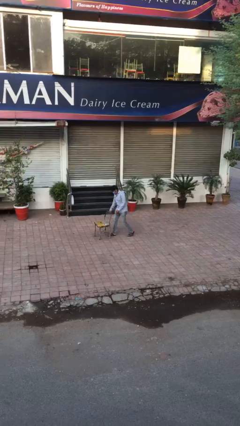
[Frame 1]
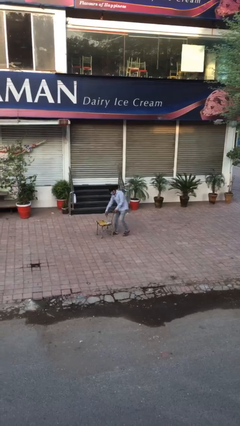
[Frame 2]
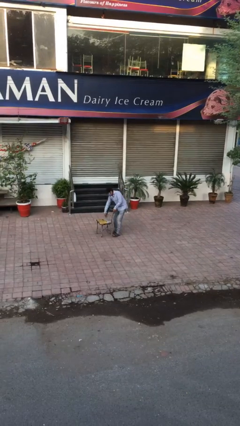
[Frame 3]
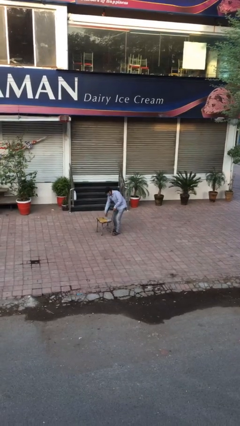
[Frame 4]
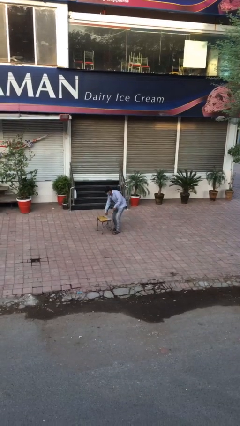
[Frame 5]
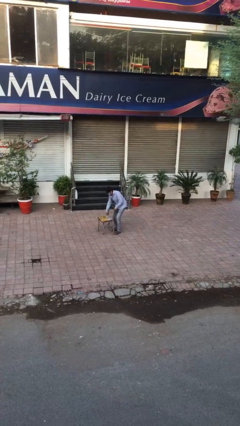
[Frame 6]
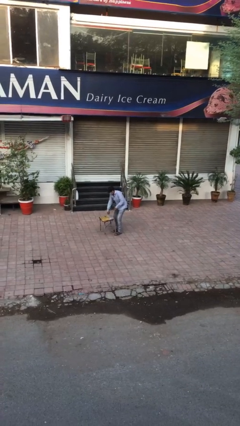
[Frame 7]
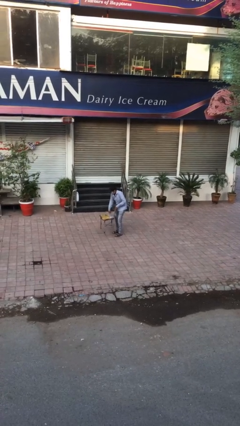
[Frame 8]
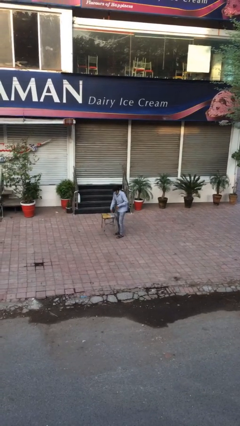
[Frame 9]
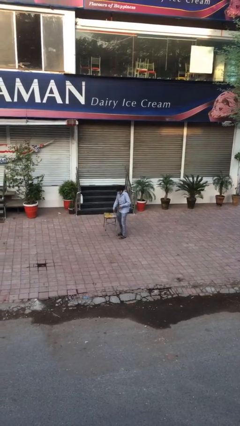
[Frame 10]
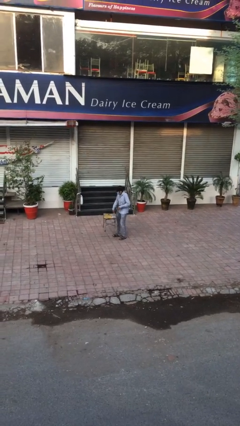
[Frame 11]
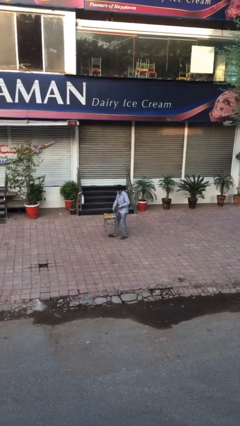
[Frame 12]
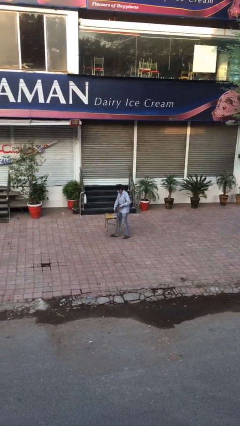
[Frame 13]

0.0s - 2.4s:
person picks up object from floor

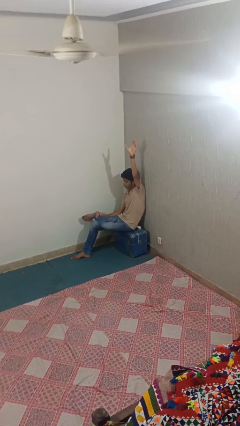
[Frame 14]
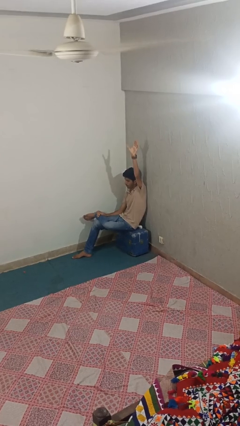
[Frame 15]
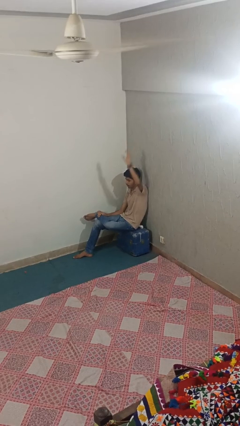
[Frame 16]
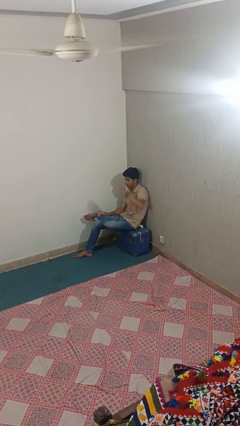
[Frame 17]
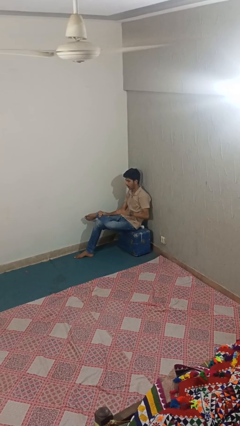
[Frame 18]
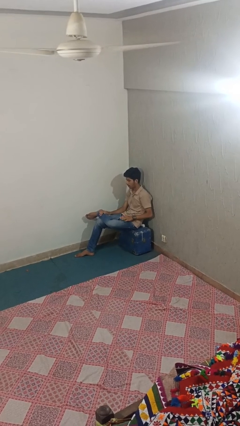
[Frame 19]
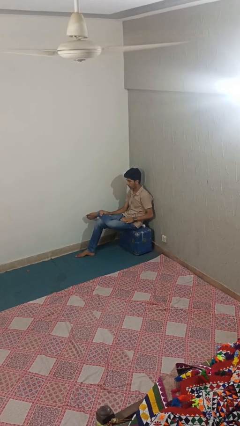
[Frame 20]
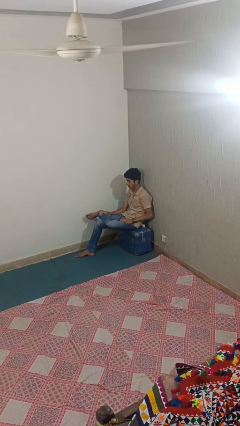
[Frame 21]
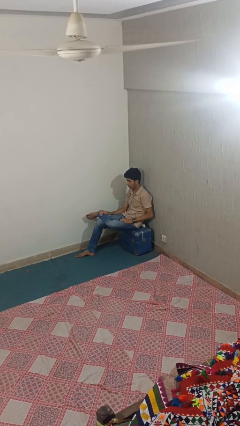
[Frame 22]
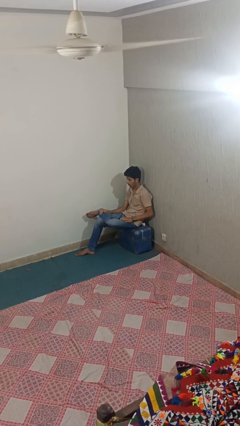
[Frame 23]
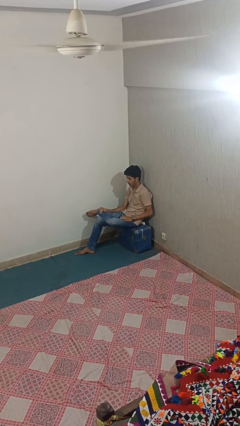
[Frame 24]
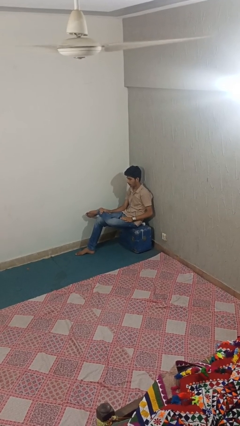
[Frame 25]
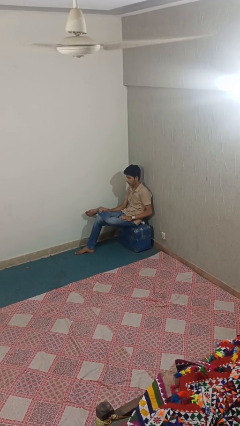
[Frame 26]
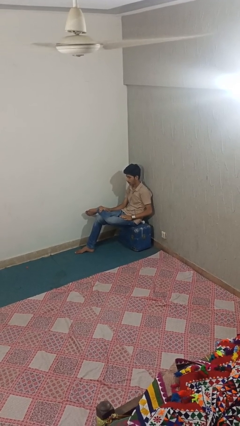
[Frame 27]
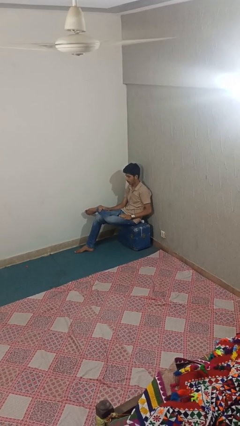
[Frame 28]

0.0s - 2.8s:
person gestures lower hand

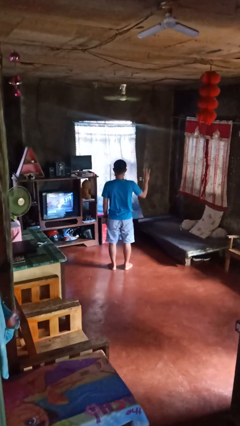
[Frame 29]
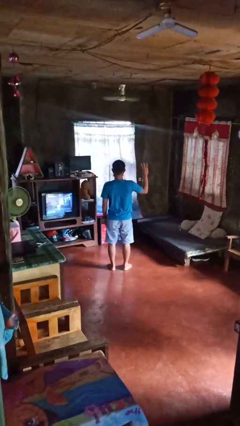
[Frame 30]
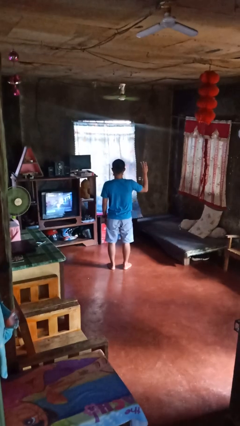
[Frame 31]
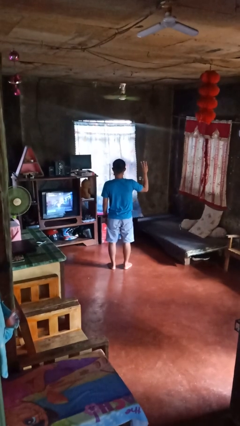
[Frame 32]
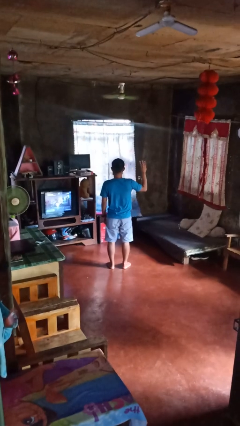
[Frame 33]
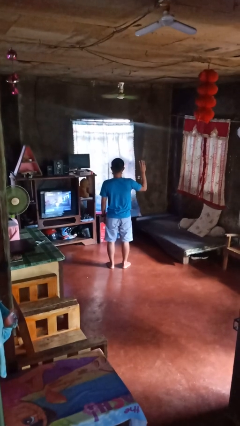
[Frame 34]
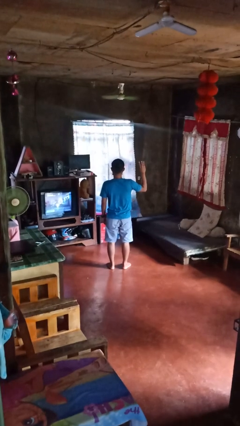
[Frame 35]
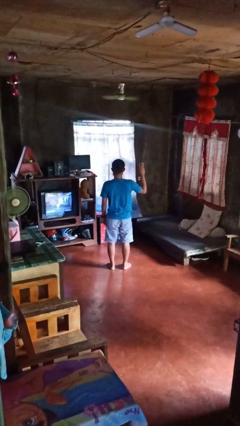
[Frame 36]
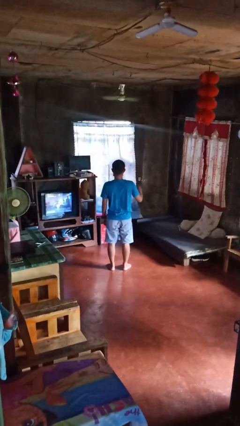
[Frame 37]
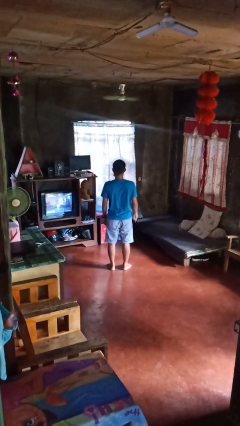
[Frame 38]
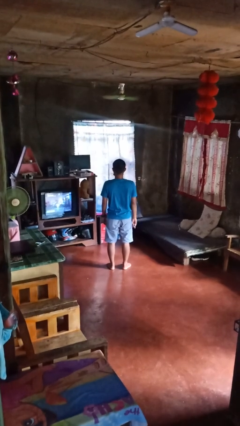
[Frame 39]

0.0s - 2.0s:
person gestures number three

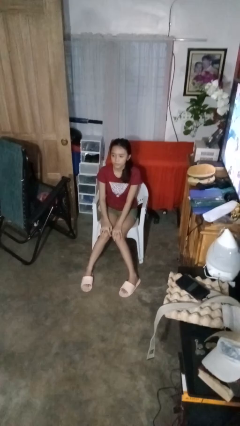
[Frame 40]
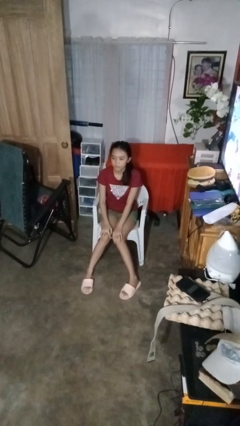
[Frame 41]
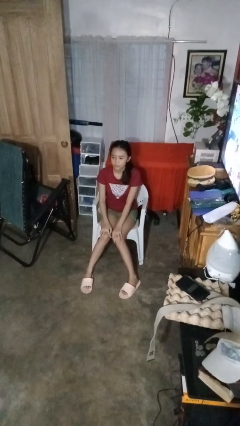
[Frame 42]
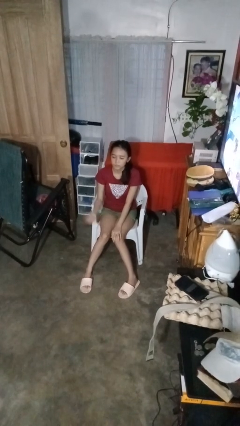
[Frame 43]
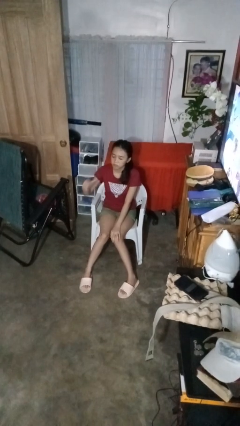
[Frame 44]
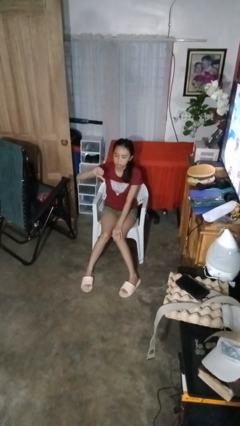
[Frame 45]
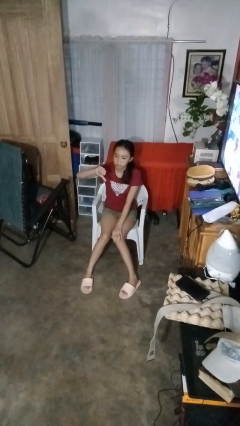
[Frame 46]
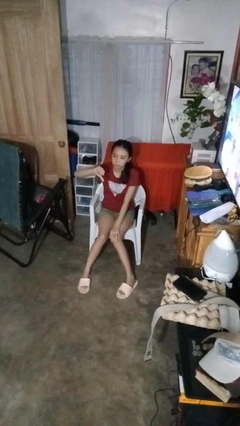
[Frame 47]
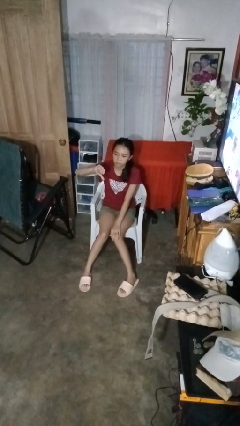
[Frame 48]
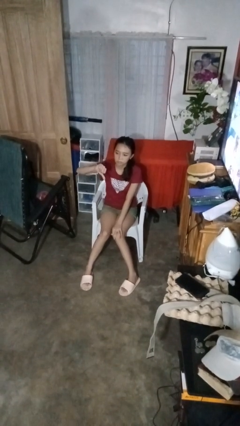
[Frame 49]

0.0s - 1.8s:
person gestures thumbs down

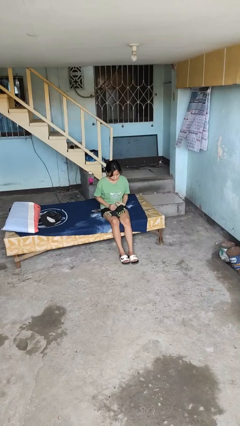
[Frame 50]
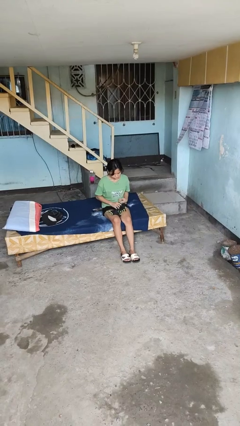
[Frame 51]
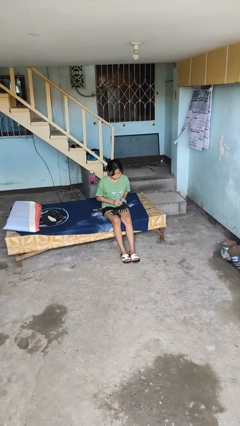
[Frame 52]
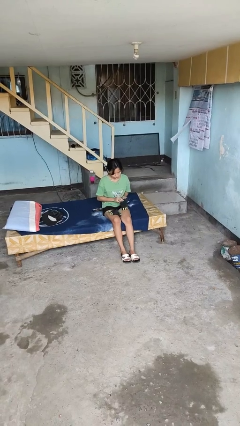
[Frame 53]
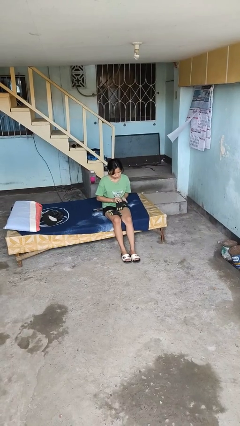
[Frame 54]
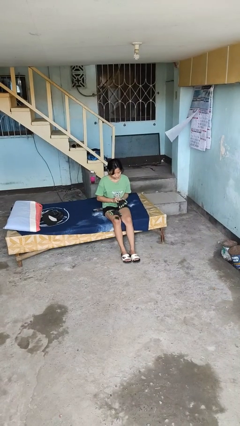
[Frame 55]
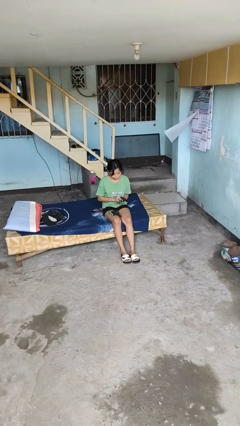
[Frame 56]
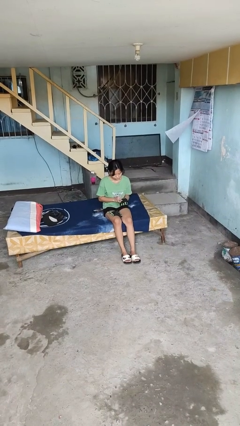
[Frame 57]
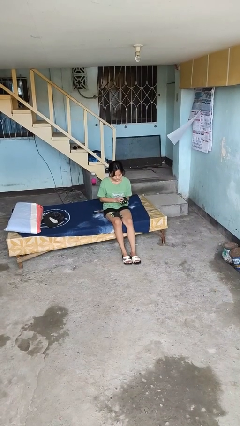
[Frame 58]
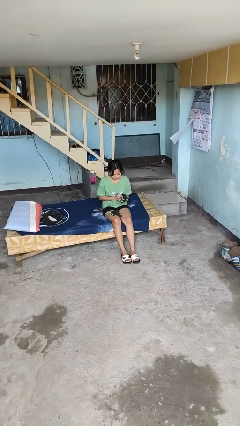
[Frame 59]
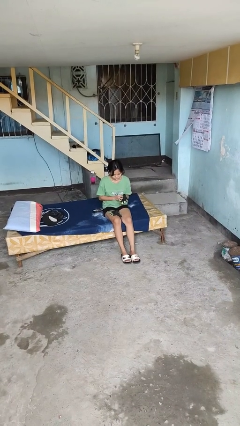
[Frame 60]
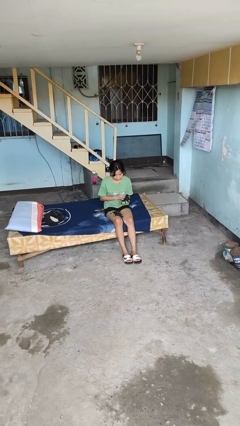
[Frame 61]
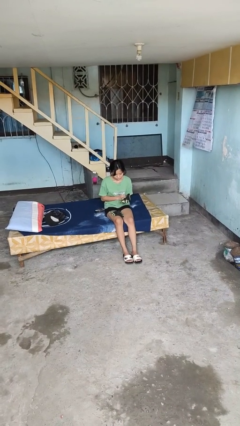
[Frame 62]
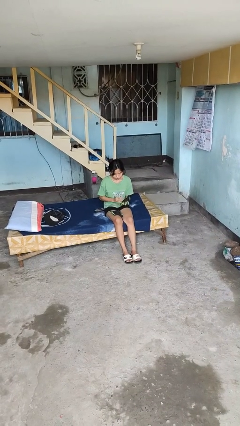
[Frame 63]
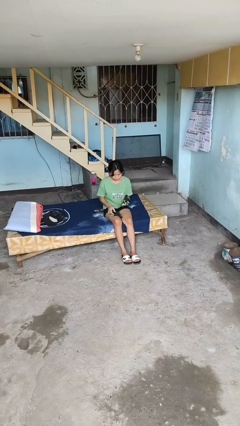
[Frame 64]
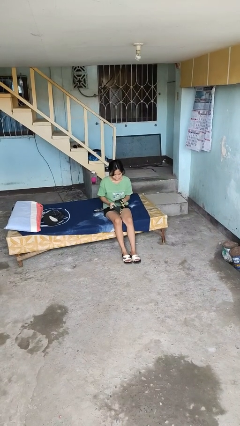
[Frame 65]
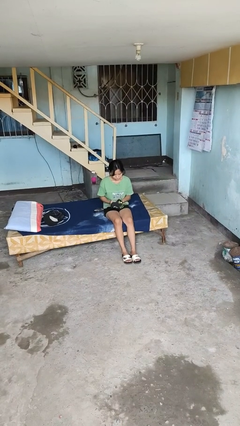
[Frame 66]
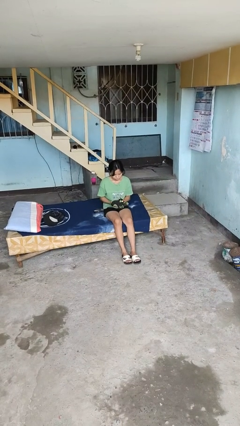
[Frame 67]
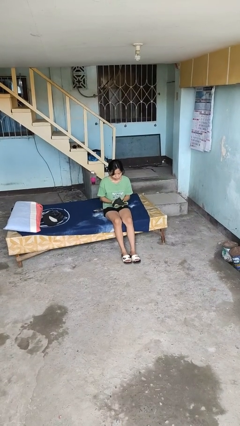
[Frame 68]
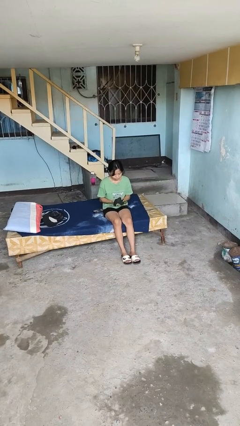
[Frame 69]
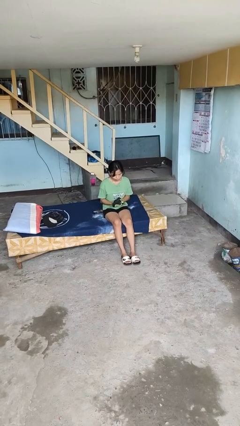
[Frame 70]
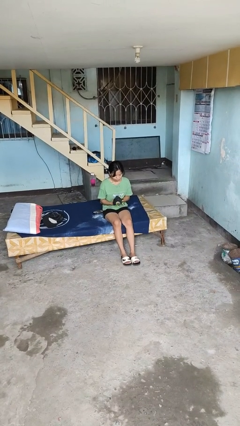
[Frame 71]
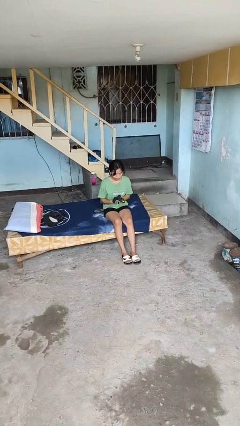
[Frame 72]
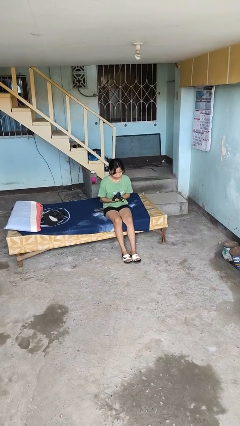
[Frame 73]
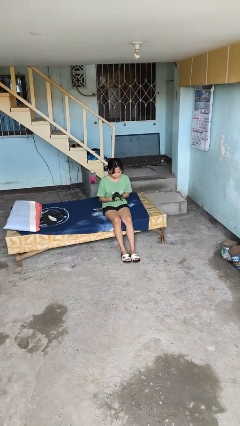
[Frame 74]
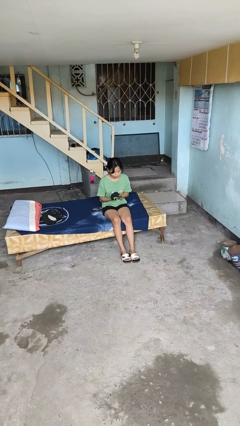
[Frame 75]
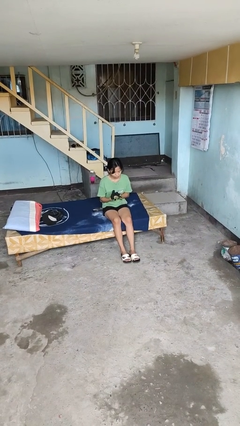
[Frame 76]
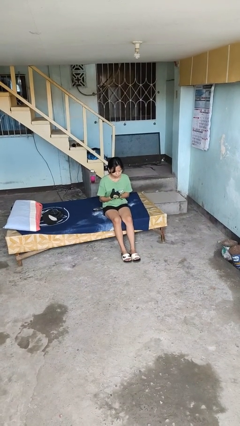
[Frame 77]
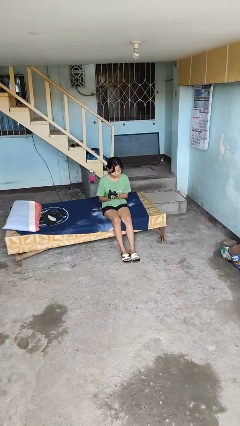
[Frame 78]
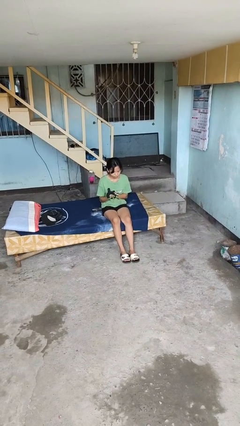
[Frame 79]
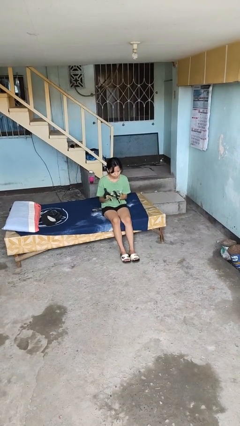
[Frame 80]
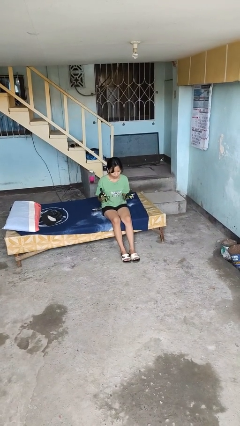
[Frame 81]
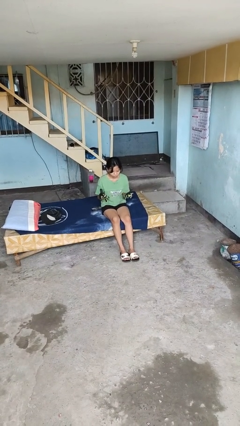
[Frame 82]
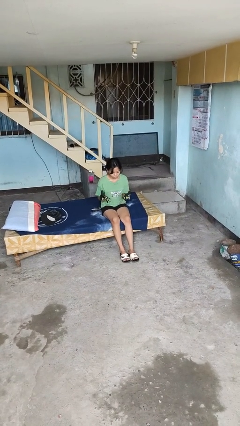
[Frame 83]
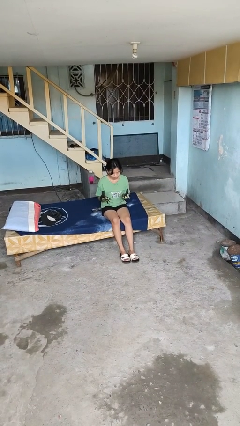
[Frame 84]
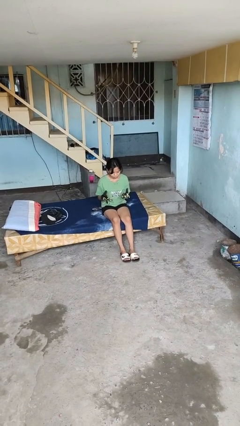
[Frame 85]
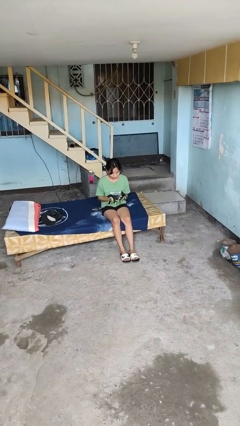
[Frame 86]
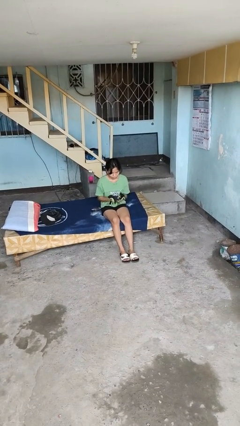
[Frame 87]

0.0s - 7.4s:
person puts on gloves

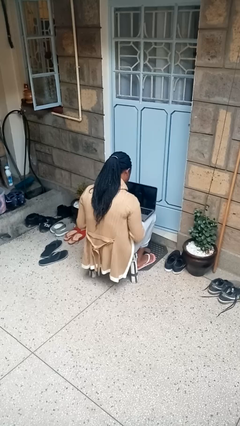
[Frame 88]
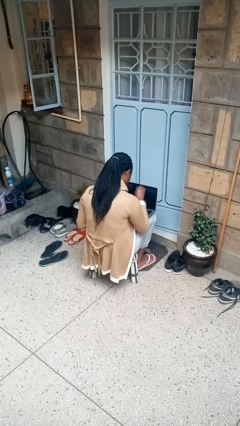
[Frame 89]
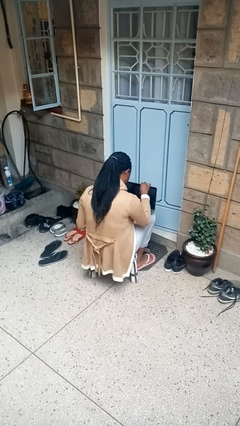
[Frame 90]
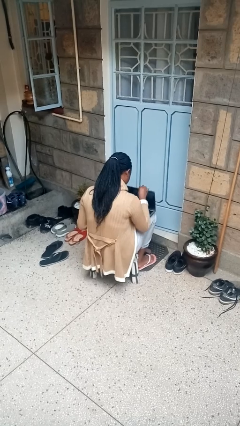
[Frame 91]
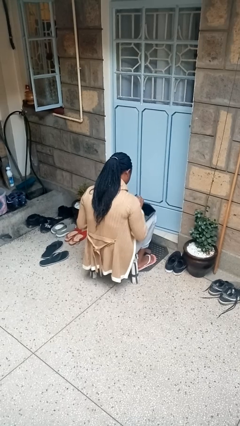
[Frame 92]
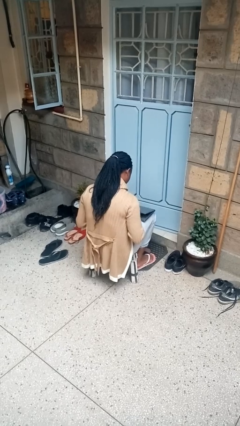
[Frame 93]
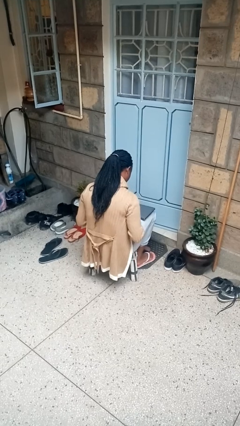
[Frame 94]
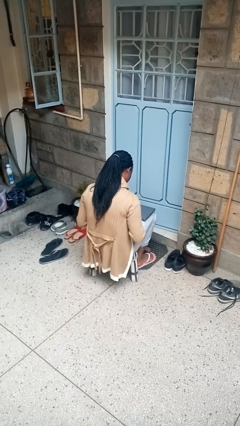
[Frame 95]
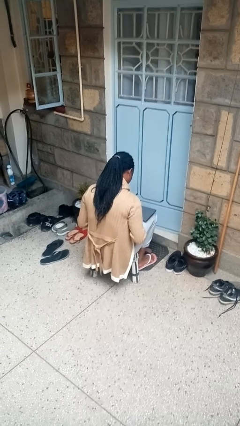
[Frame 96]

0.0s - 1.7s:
person closes laptop
